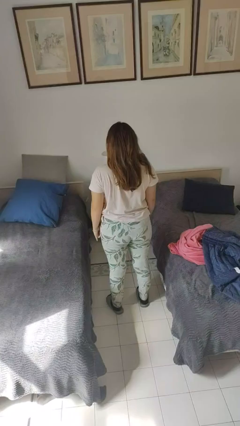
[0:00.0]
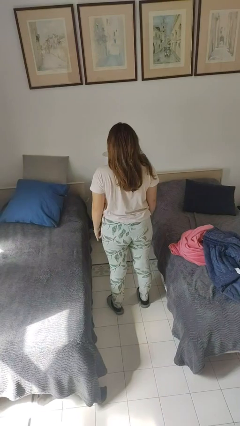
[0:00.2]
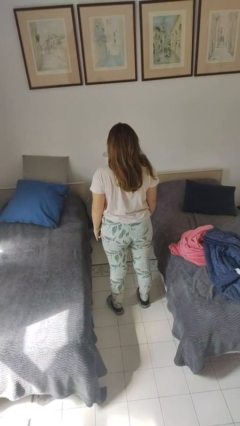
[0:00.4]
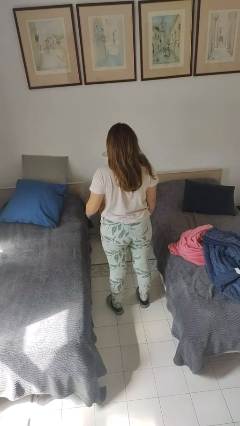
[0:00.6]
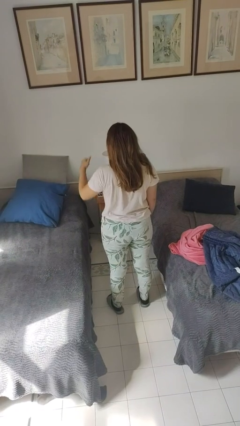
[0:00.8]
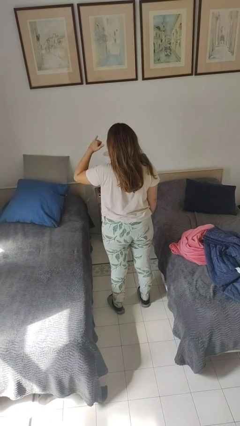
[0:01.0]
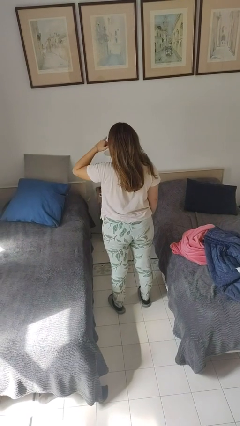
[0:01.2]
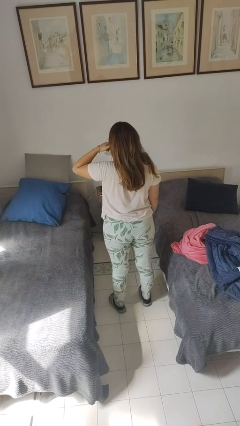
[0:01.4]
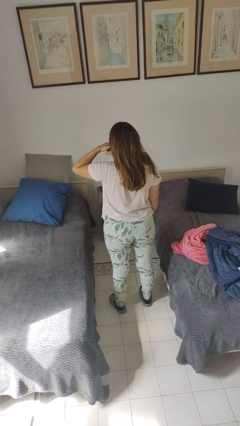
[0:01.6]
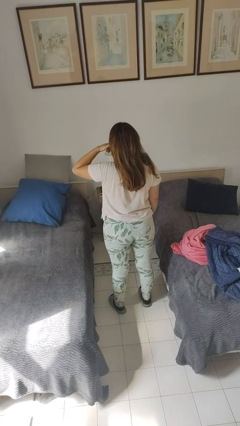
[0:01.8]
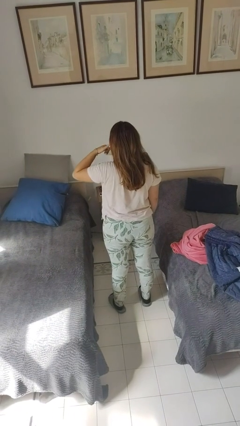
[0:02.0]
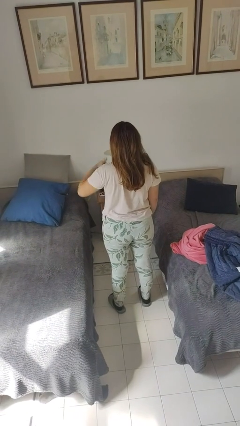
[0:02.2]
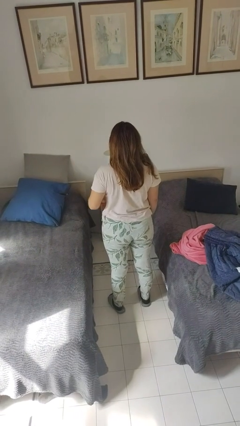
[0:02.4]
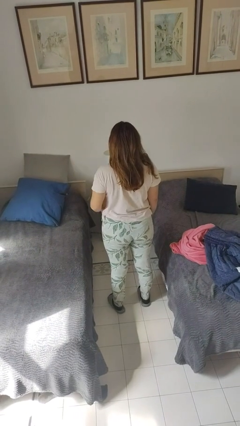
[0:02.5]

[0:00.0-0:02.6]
person gestures call me

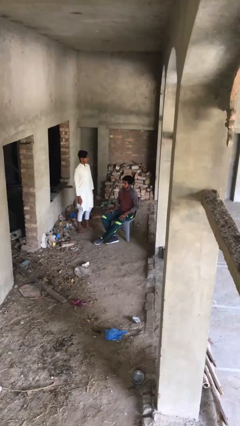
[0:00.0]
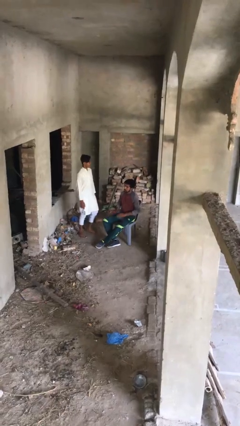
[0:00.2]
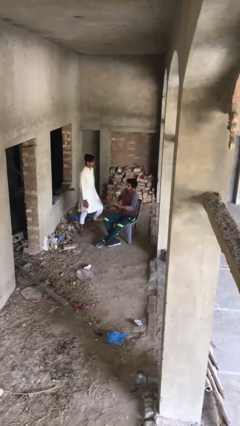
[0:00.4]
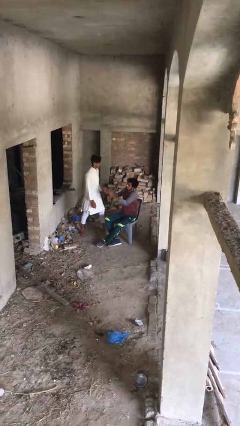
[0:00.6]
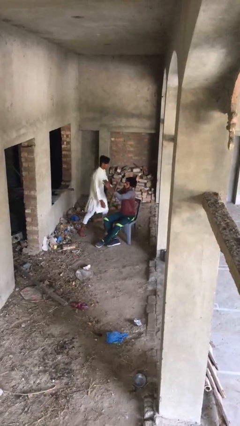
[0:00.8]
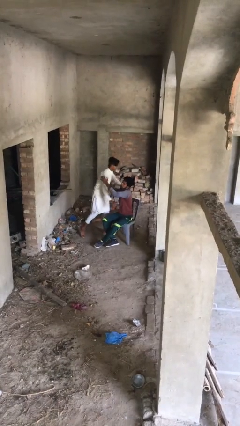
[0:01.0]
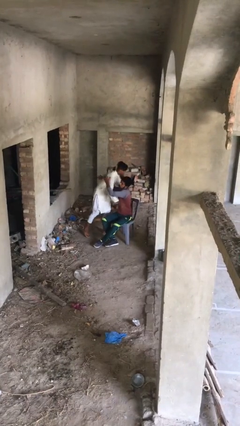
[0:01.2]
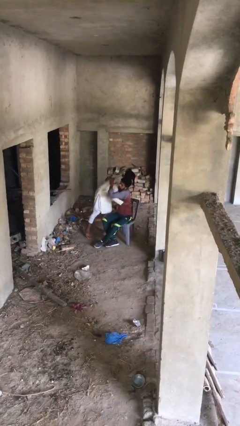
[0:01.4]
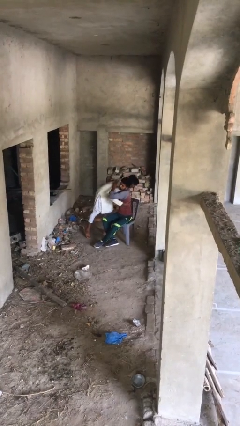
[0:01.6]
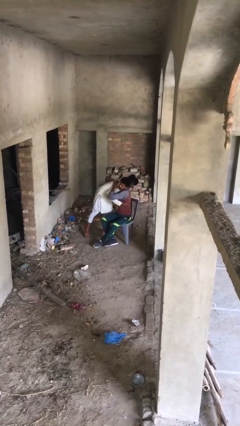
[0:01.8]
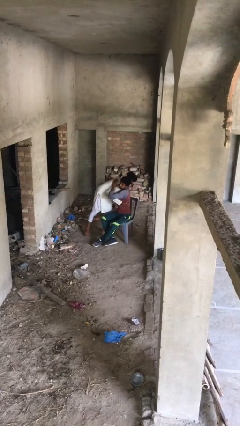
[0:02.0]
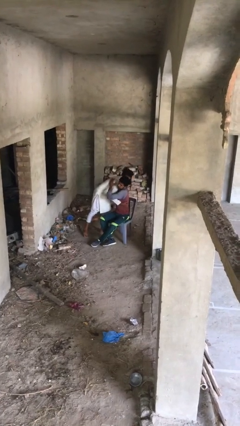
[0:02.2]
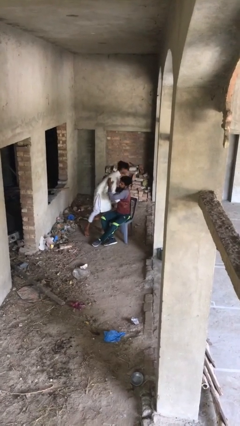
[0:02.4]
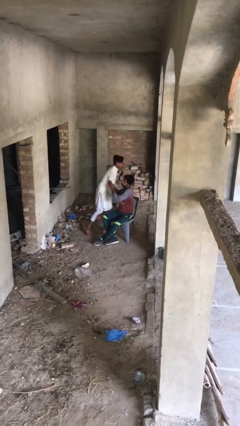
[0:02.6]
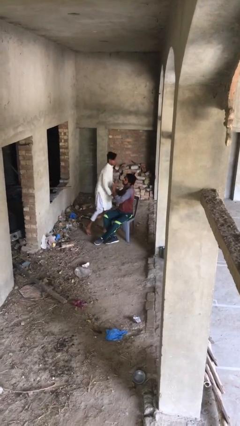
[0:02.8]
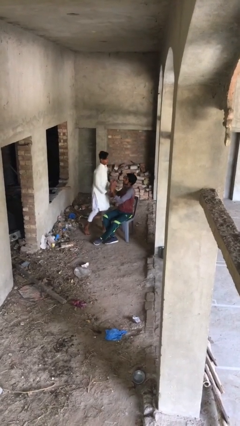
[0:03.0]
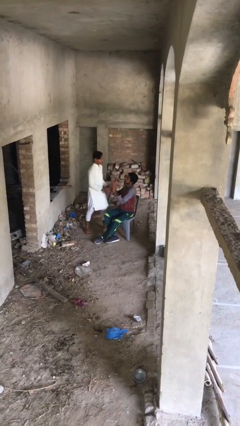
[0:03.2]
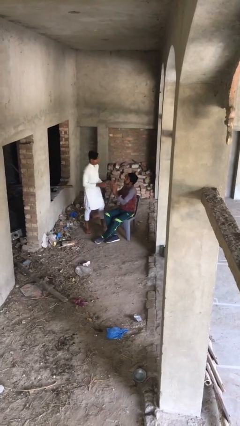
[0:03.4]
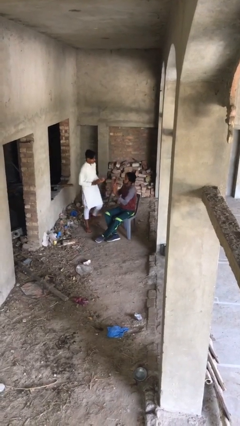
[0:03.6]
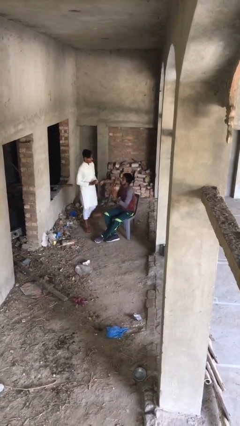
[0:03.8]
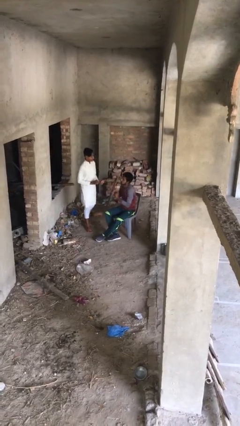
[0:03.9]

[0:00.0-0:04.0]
person embraces person

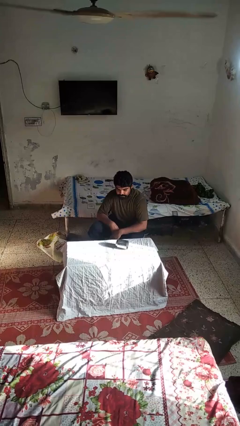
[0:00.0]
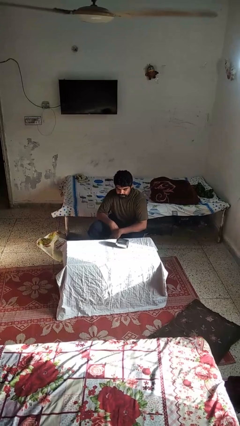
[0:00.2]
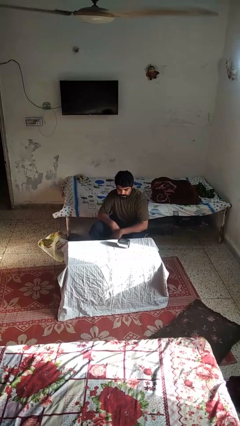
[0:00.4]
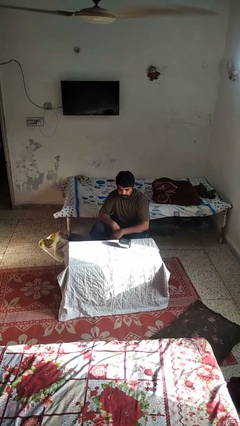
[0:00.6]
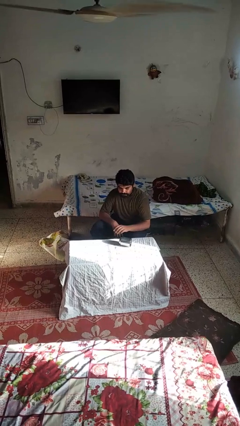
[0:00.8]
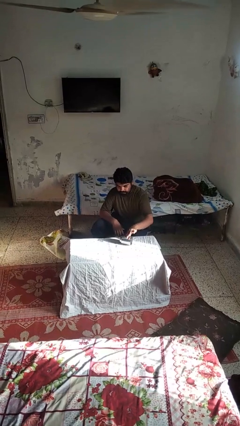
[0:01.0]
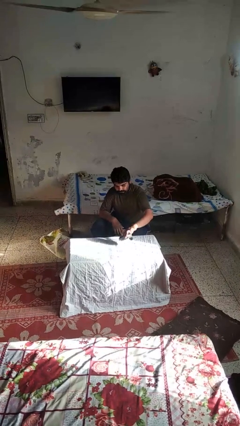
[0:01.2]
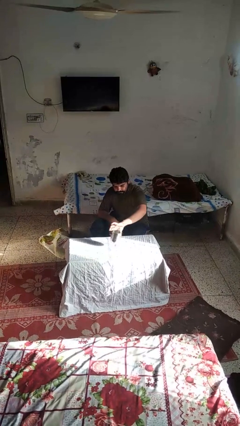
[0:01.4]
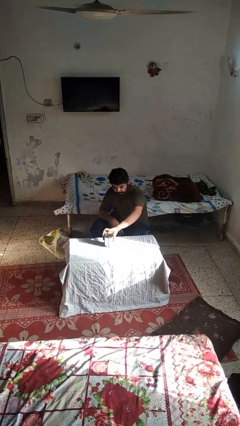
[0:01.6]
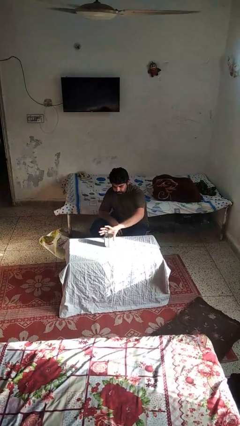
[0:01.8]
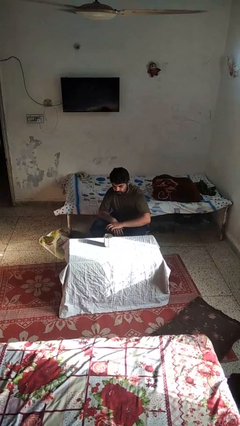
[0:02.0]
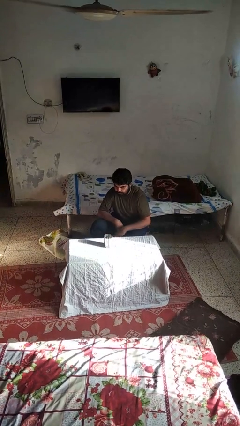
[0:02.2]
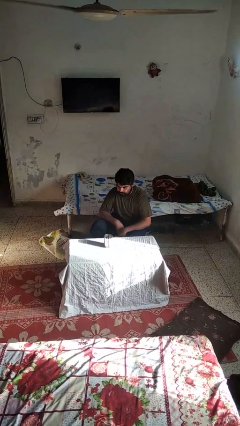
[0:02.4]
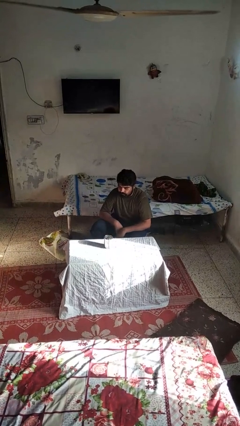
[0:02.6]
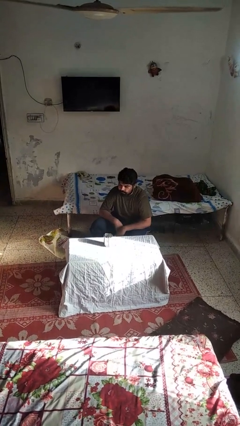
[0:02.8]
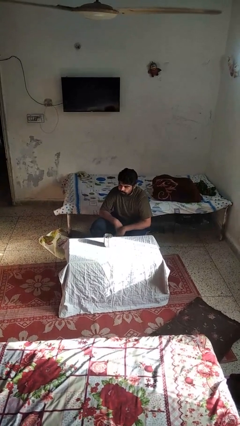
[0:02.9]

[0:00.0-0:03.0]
person sets upright glass

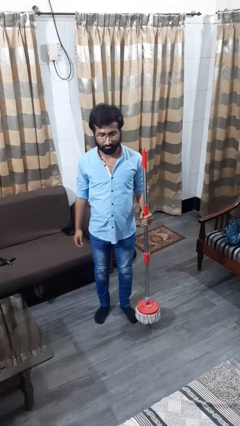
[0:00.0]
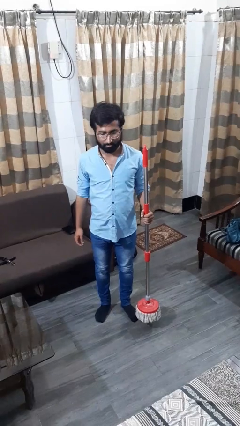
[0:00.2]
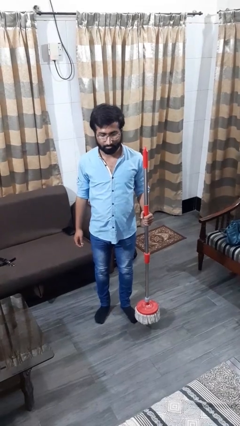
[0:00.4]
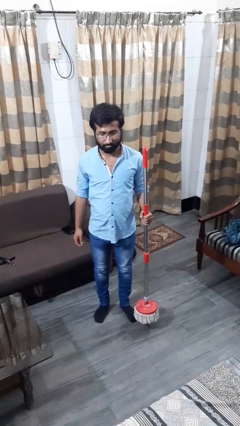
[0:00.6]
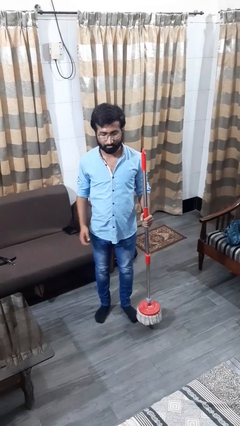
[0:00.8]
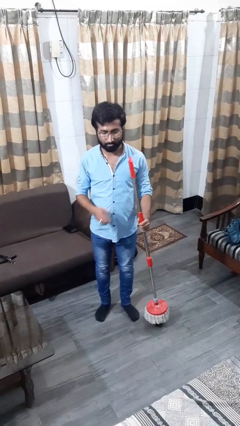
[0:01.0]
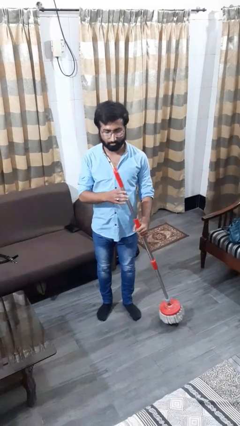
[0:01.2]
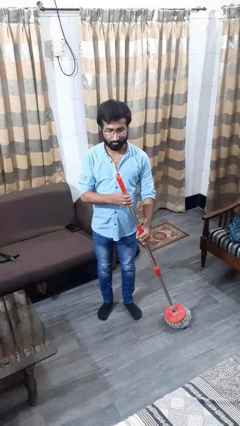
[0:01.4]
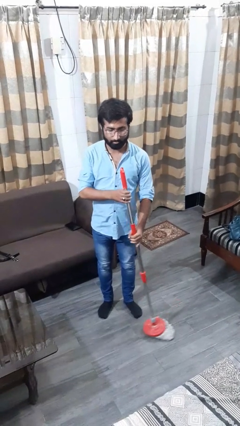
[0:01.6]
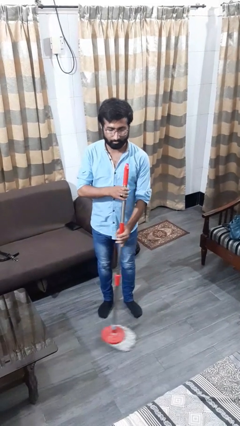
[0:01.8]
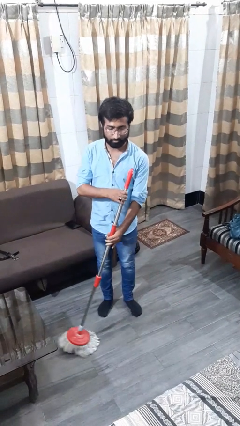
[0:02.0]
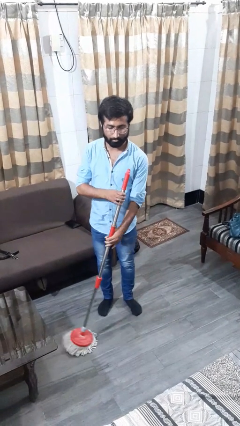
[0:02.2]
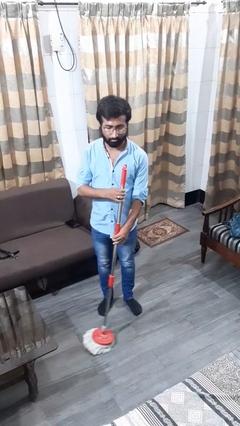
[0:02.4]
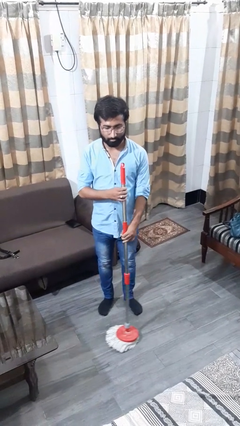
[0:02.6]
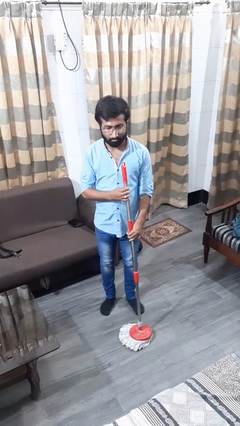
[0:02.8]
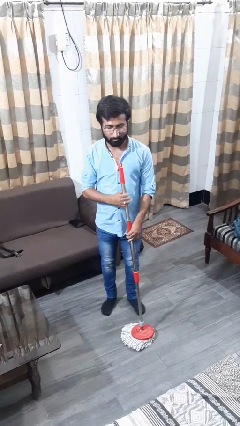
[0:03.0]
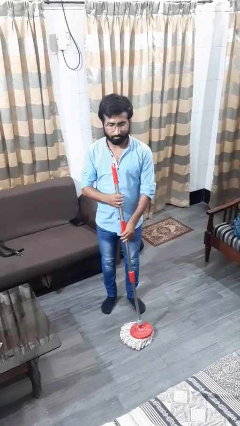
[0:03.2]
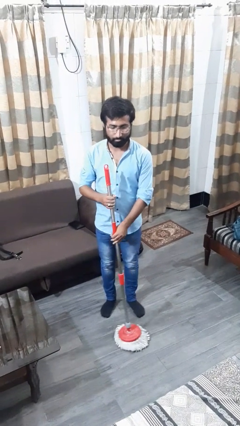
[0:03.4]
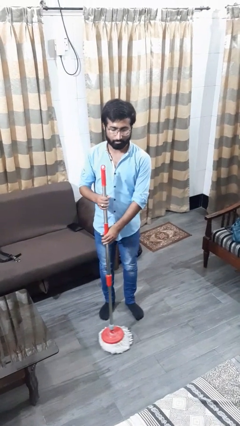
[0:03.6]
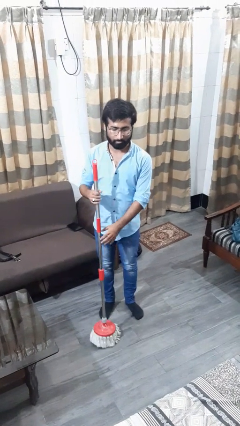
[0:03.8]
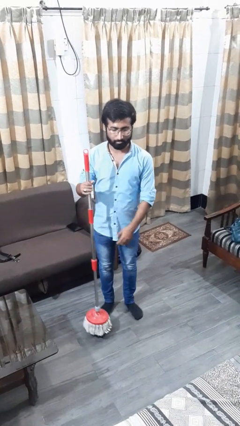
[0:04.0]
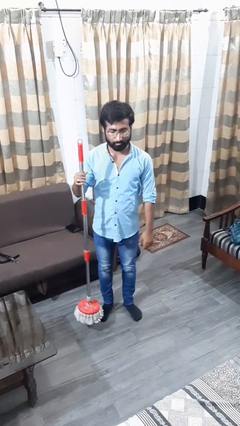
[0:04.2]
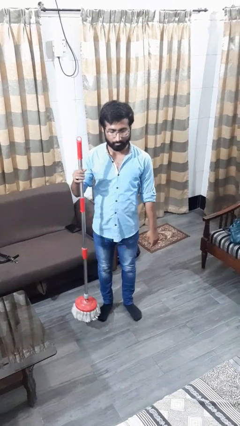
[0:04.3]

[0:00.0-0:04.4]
person sweeps floor

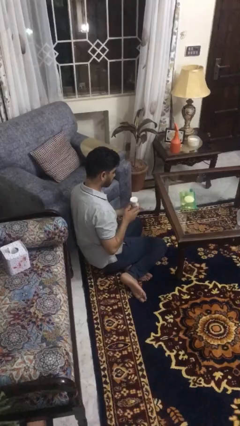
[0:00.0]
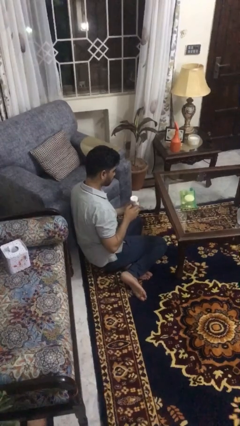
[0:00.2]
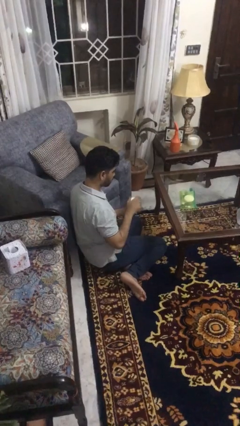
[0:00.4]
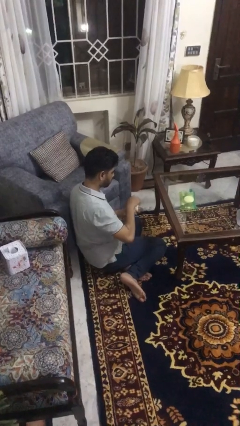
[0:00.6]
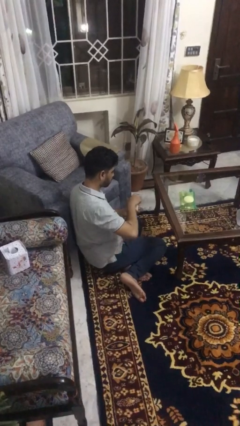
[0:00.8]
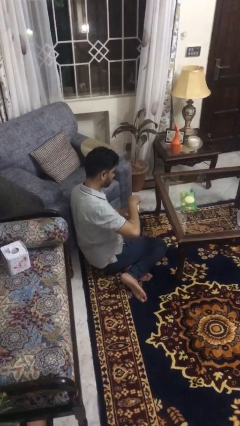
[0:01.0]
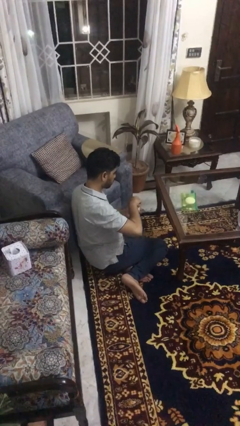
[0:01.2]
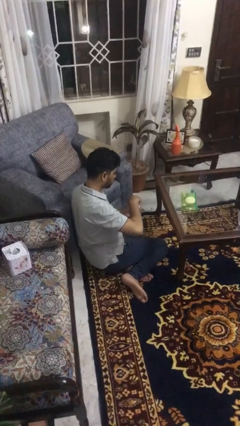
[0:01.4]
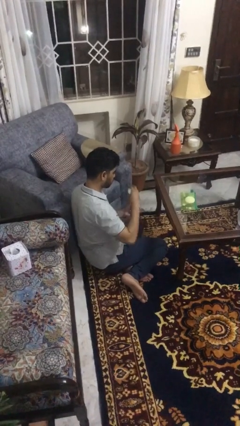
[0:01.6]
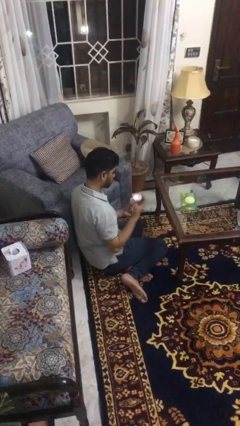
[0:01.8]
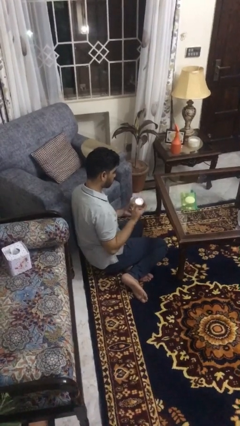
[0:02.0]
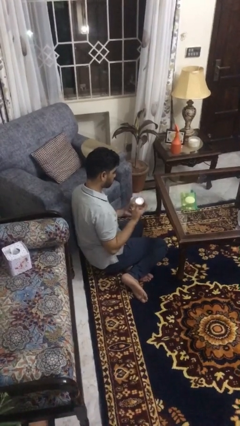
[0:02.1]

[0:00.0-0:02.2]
person opens jar

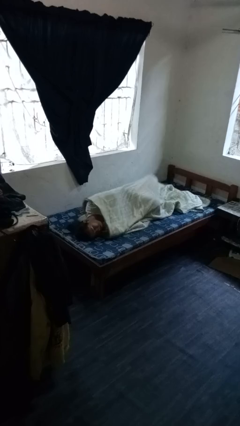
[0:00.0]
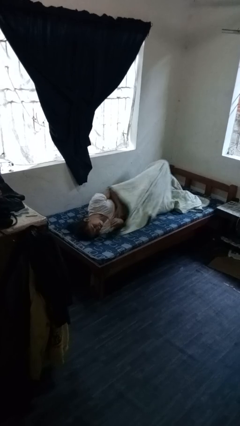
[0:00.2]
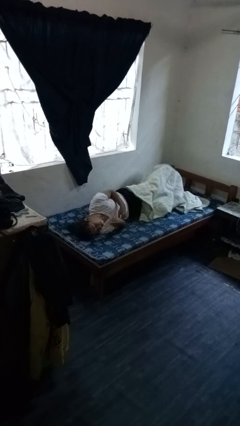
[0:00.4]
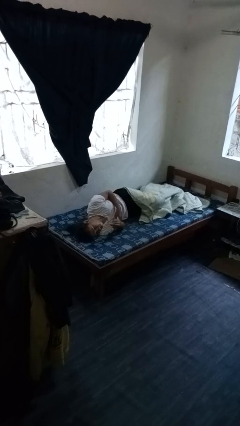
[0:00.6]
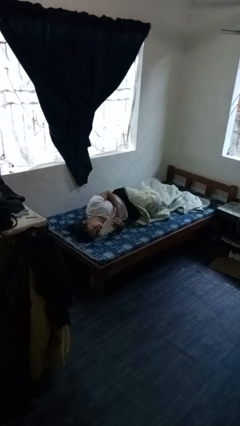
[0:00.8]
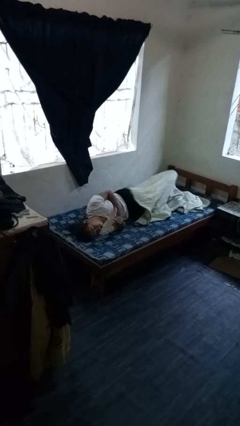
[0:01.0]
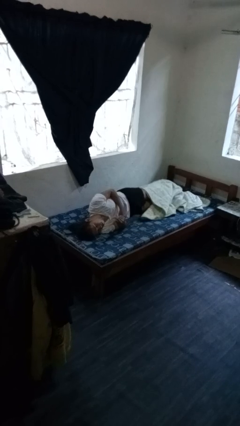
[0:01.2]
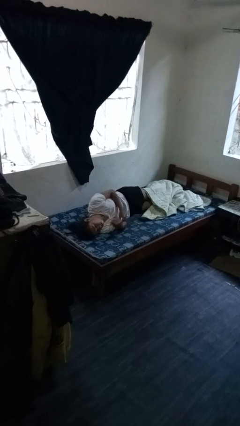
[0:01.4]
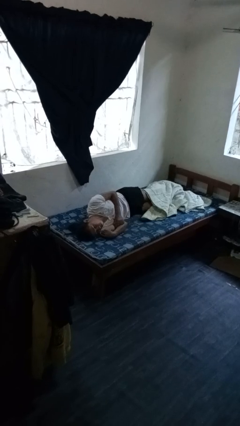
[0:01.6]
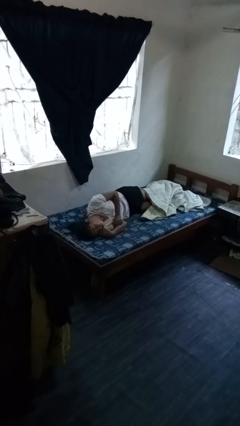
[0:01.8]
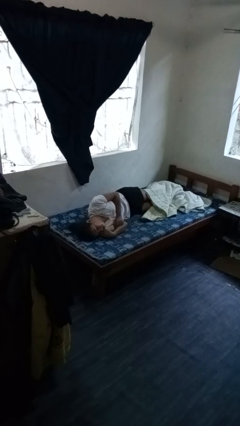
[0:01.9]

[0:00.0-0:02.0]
person uncovers with bedsheets
